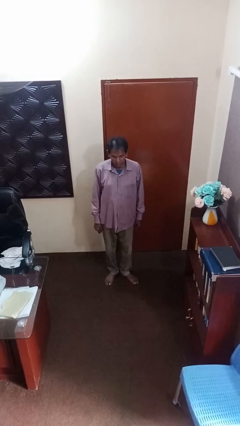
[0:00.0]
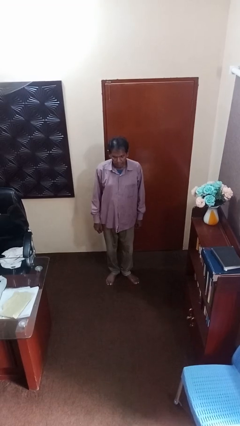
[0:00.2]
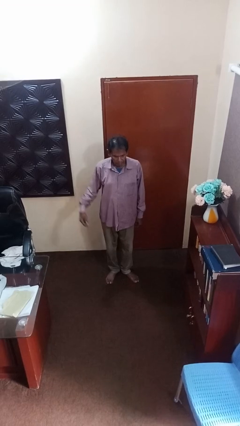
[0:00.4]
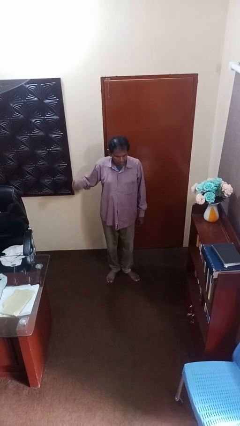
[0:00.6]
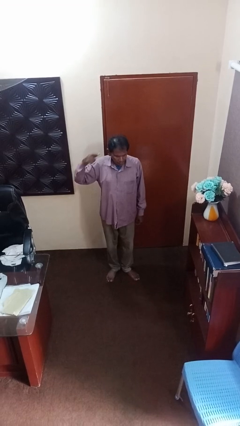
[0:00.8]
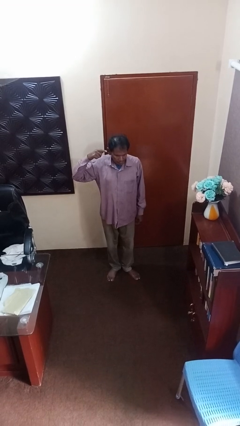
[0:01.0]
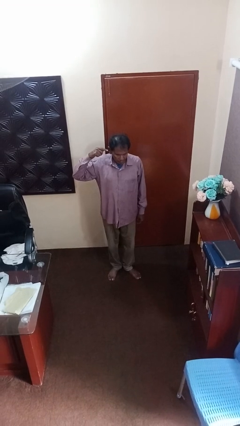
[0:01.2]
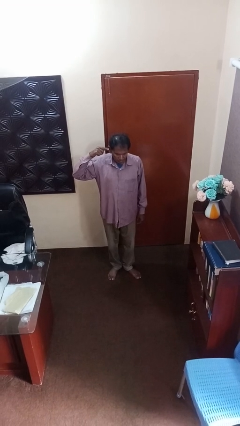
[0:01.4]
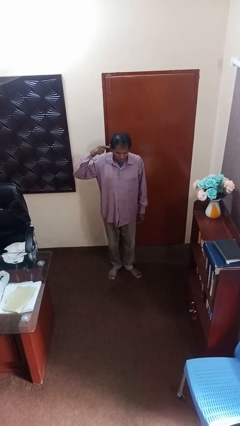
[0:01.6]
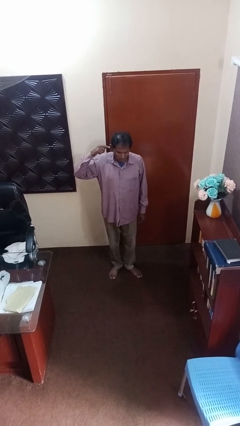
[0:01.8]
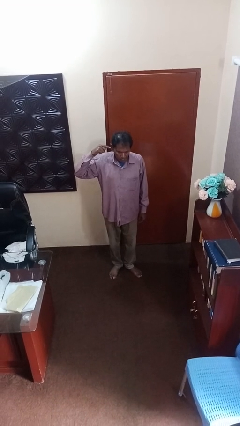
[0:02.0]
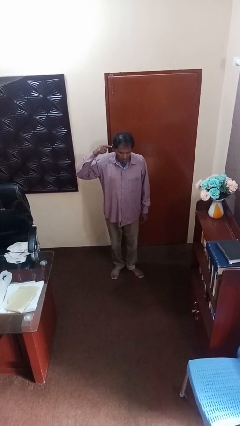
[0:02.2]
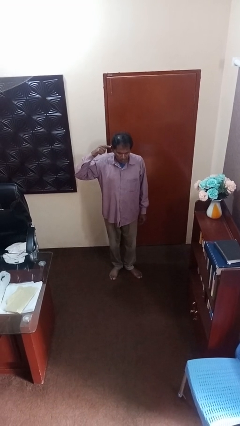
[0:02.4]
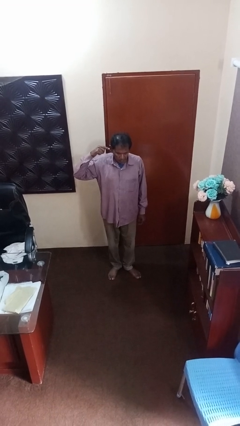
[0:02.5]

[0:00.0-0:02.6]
person gestures be quiet

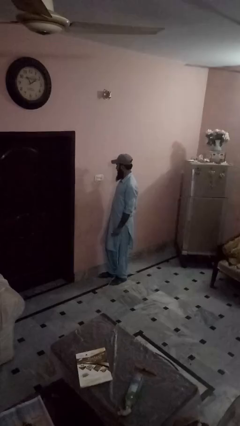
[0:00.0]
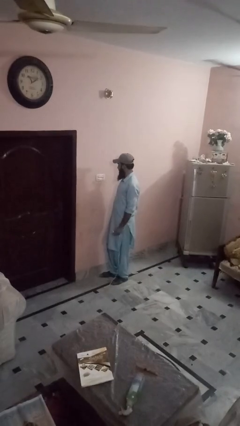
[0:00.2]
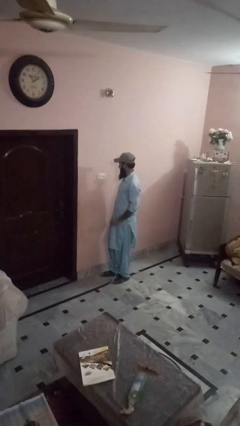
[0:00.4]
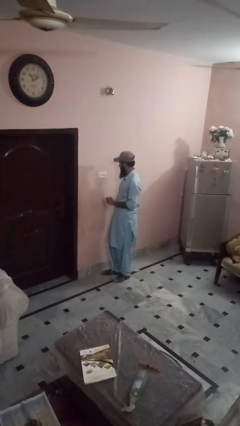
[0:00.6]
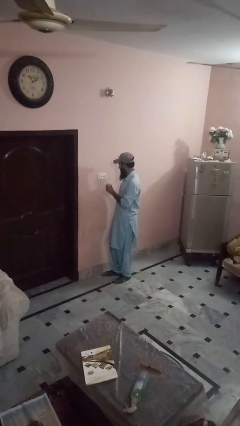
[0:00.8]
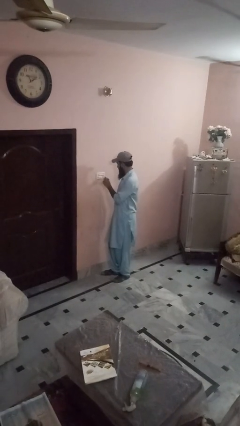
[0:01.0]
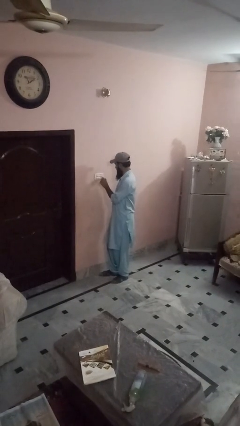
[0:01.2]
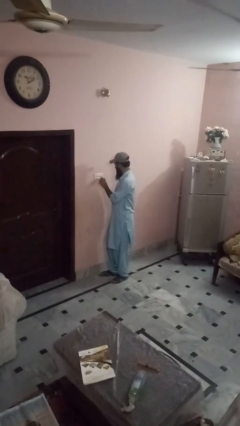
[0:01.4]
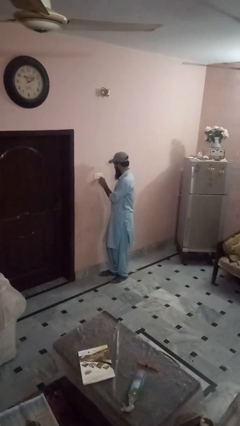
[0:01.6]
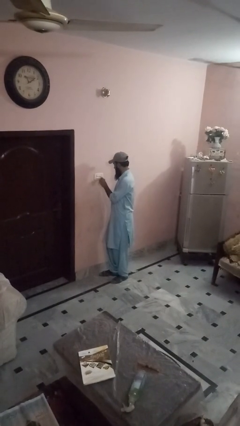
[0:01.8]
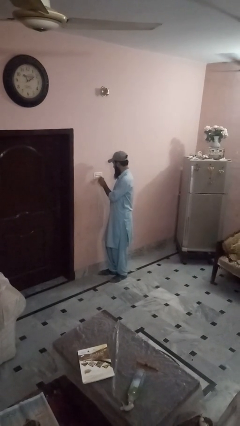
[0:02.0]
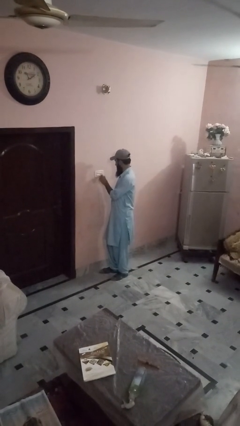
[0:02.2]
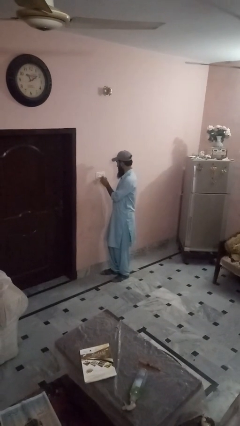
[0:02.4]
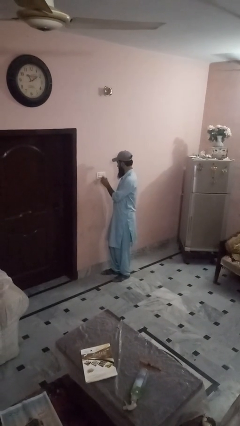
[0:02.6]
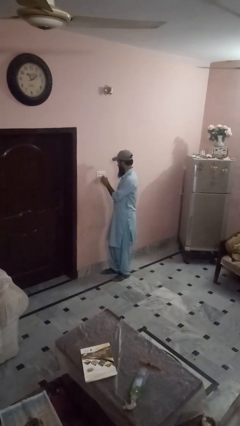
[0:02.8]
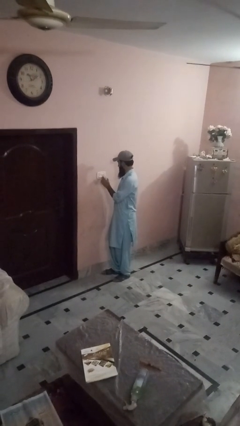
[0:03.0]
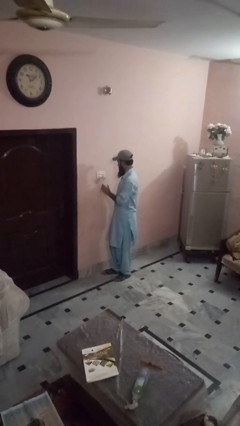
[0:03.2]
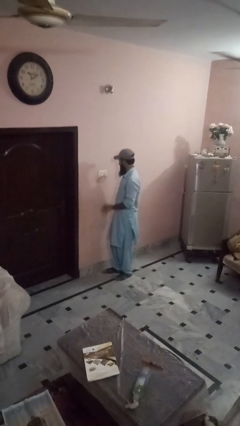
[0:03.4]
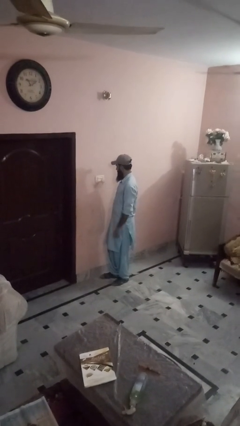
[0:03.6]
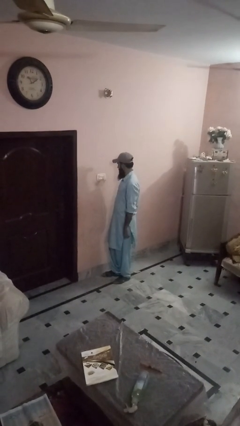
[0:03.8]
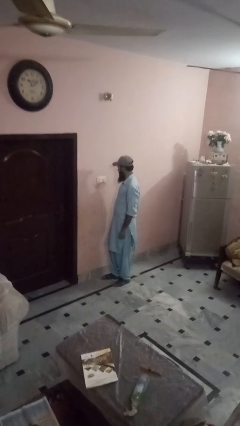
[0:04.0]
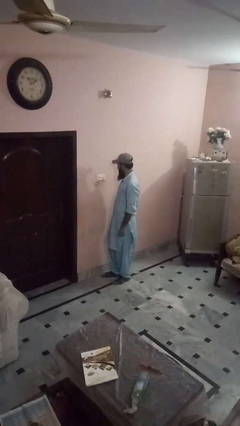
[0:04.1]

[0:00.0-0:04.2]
person plugs into electrical socket

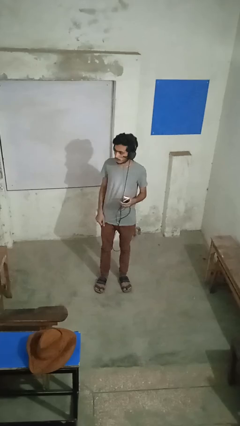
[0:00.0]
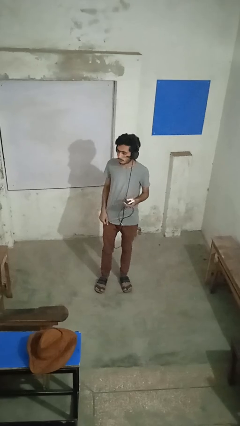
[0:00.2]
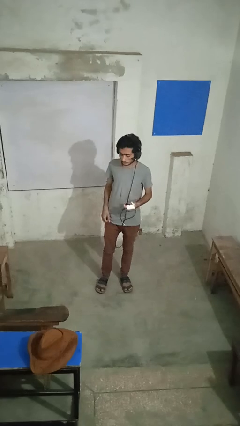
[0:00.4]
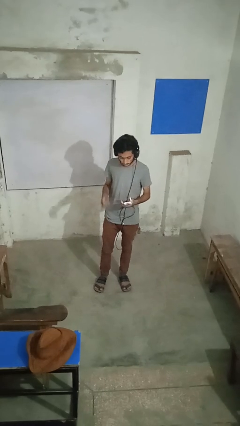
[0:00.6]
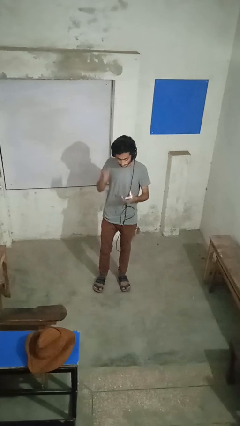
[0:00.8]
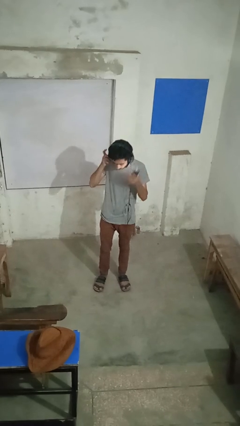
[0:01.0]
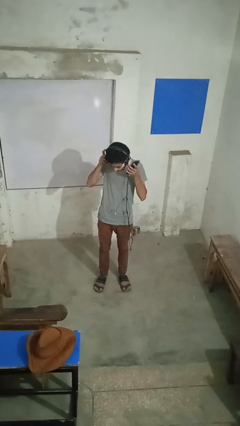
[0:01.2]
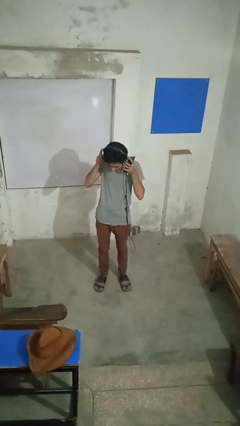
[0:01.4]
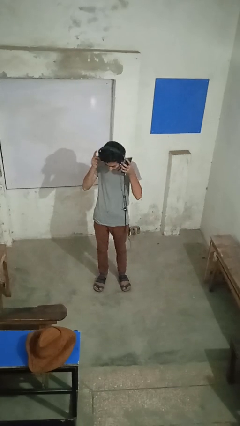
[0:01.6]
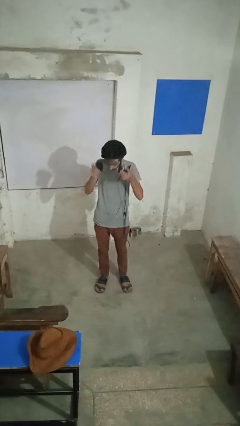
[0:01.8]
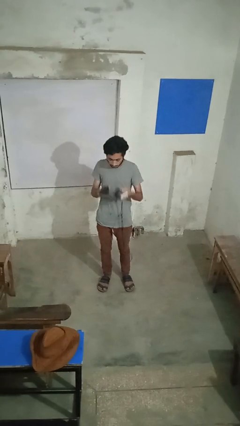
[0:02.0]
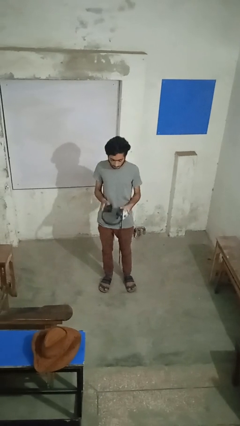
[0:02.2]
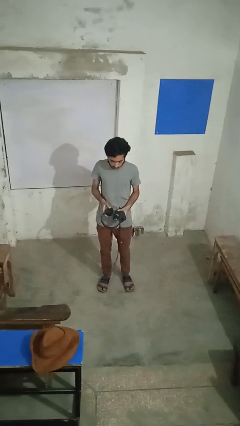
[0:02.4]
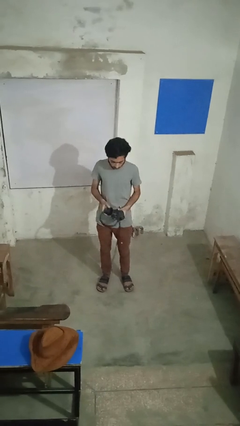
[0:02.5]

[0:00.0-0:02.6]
person takes off headphones

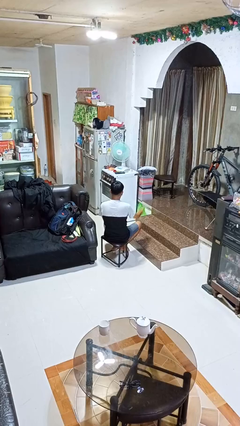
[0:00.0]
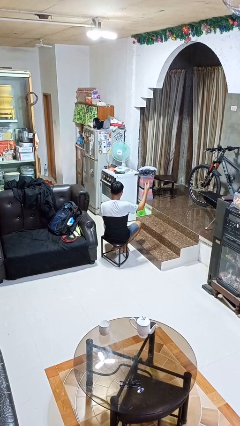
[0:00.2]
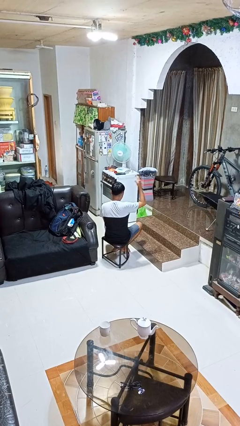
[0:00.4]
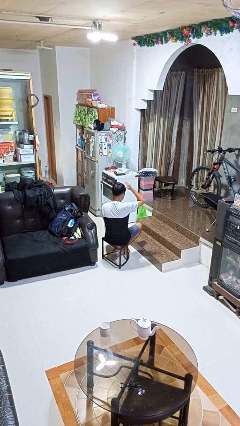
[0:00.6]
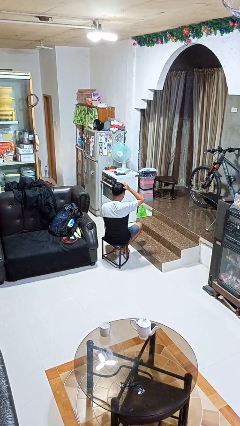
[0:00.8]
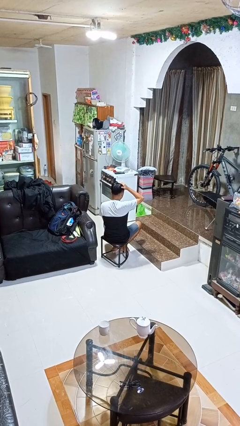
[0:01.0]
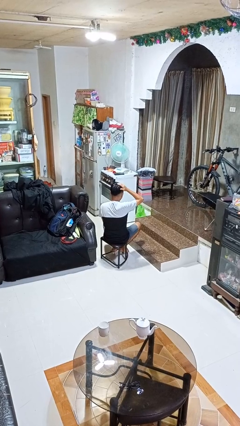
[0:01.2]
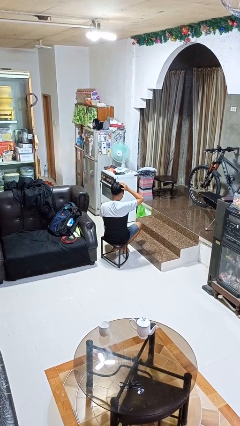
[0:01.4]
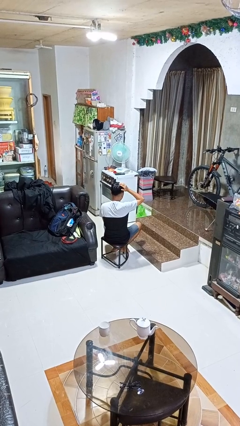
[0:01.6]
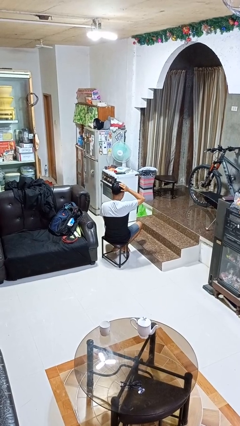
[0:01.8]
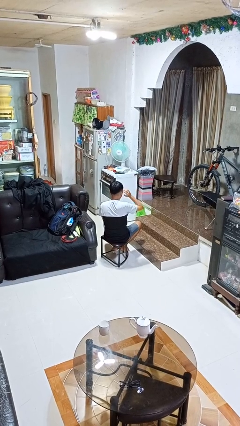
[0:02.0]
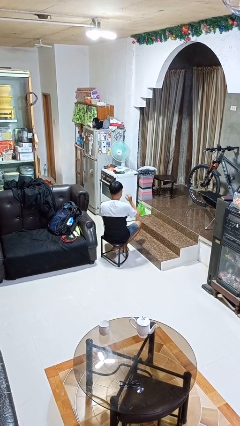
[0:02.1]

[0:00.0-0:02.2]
person pats head

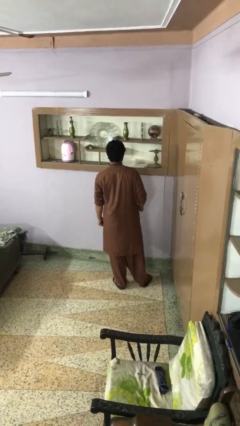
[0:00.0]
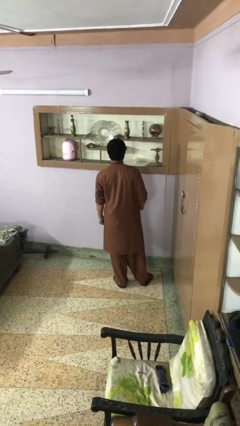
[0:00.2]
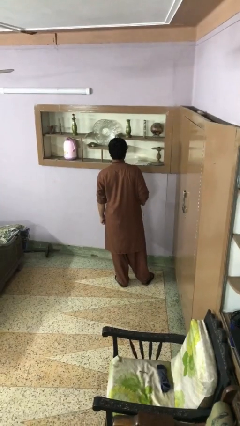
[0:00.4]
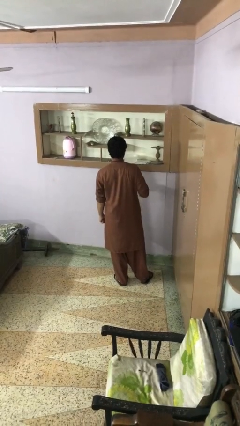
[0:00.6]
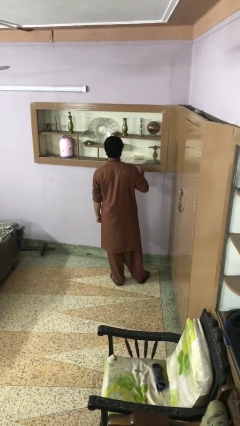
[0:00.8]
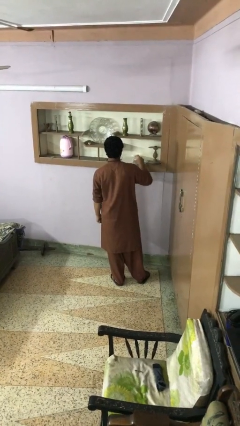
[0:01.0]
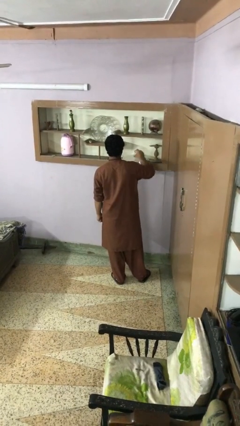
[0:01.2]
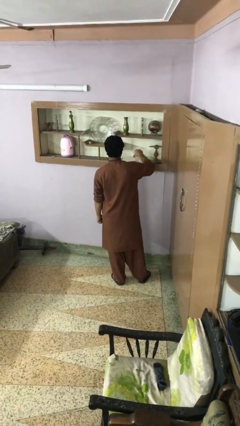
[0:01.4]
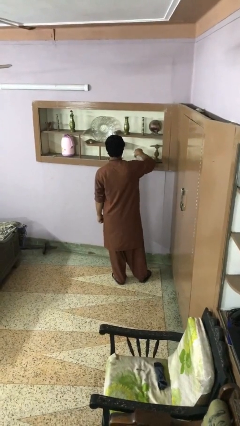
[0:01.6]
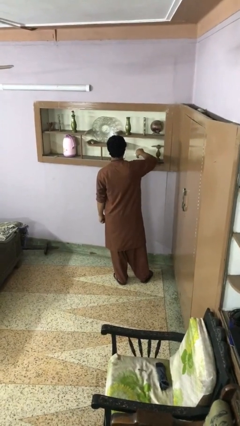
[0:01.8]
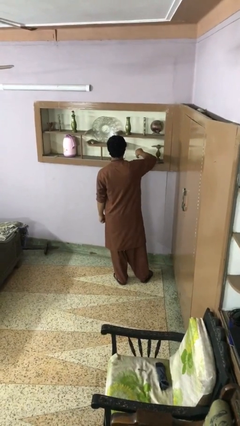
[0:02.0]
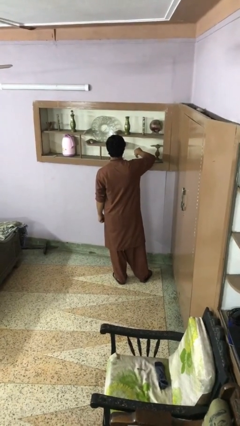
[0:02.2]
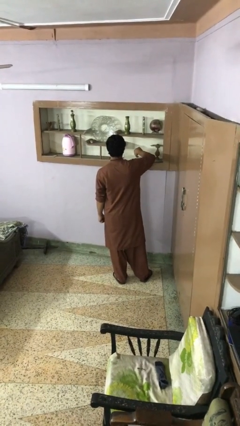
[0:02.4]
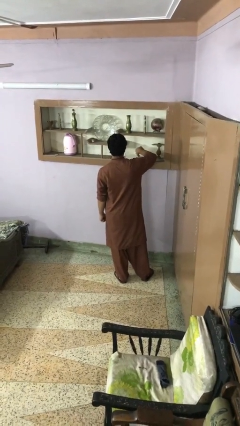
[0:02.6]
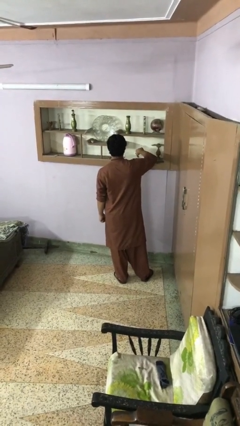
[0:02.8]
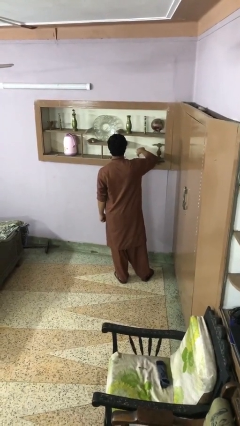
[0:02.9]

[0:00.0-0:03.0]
person pours into bowl

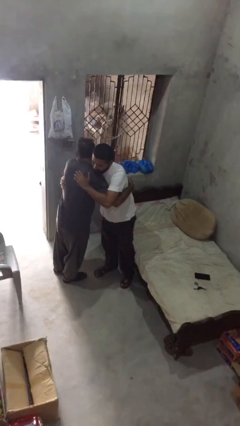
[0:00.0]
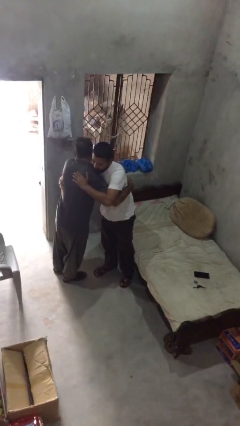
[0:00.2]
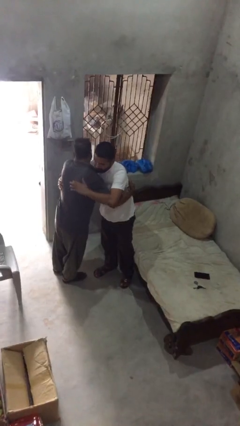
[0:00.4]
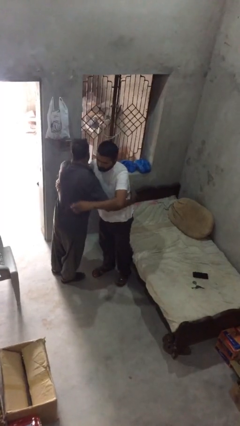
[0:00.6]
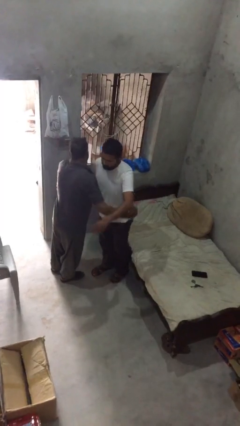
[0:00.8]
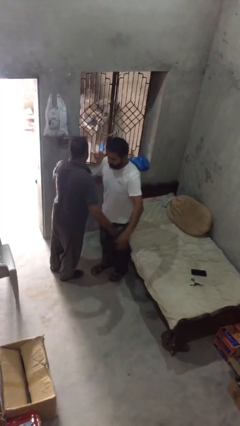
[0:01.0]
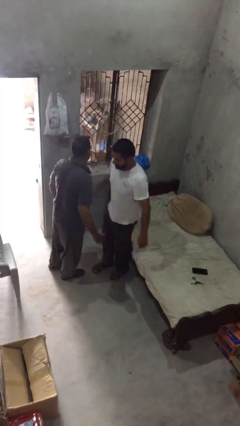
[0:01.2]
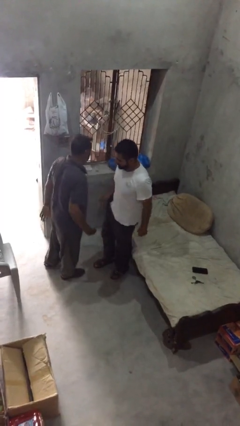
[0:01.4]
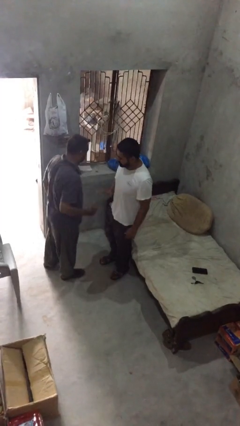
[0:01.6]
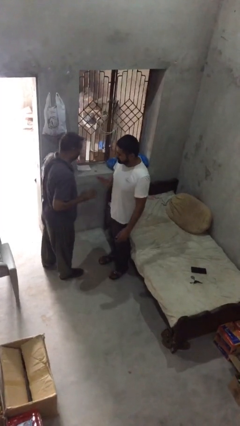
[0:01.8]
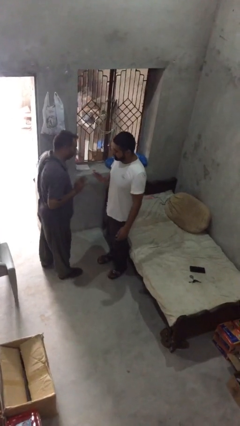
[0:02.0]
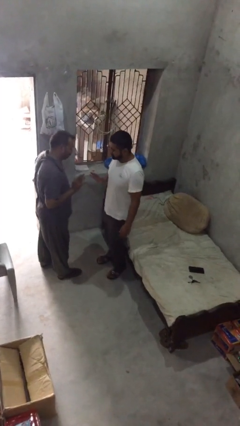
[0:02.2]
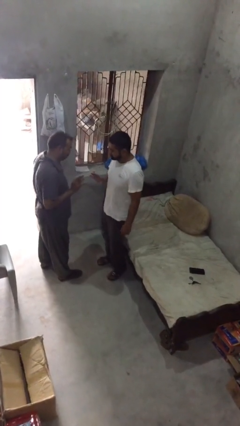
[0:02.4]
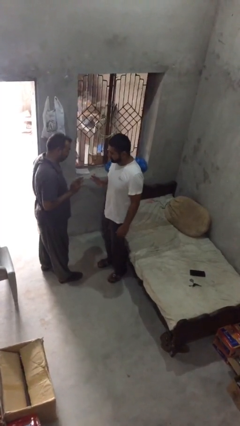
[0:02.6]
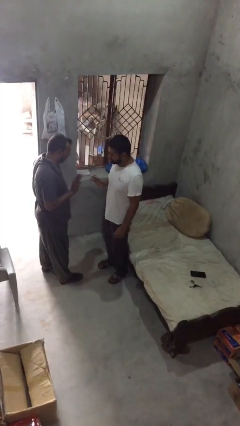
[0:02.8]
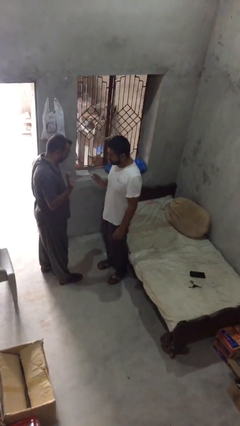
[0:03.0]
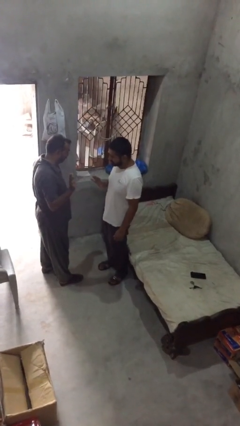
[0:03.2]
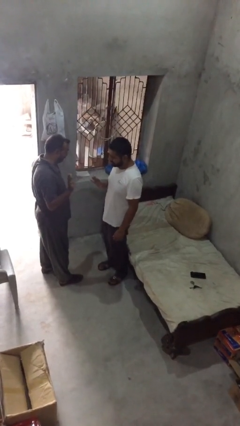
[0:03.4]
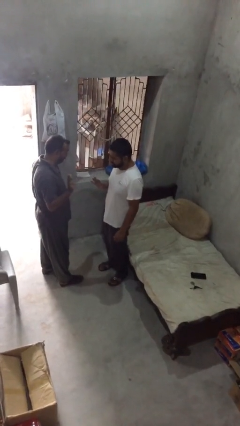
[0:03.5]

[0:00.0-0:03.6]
person talks to person
